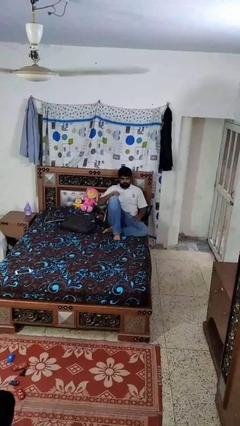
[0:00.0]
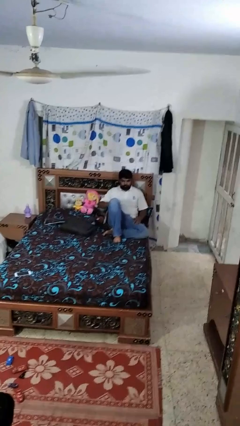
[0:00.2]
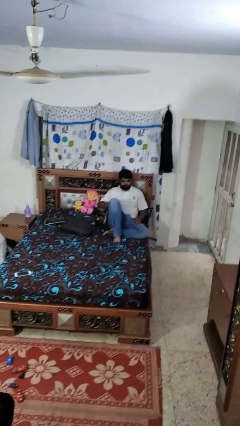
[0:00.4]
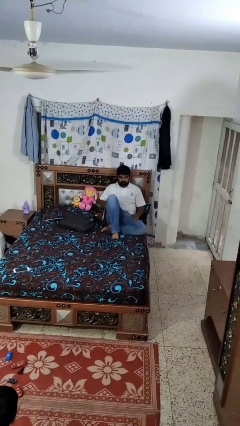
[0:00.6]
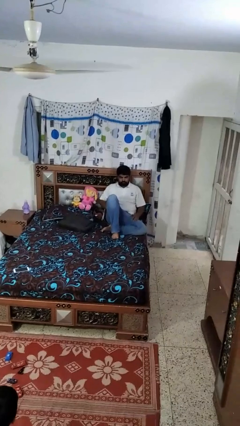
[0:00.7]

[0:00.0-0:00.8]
person gestures lower hand

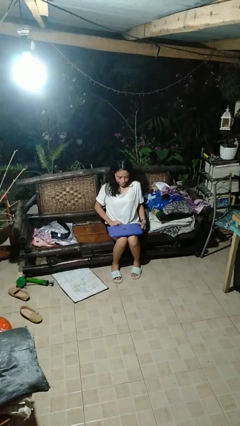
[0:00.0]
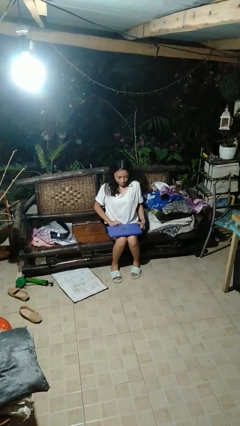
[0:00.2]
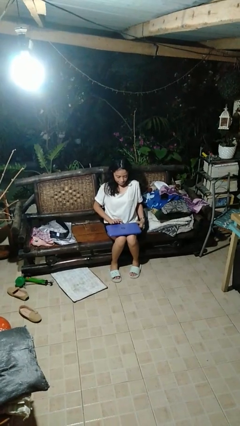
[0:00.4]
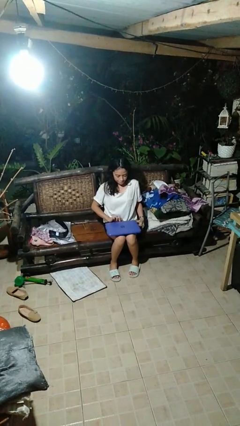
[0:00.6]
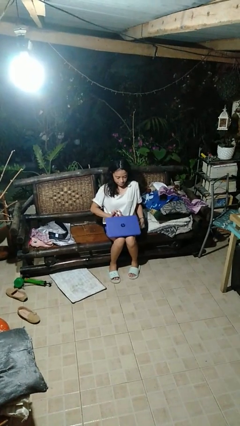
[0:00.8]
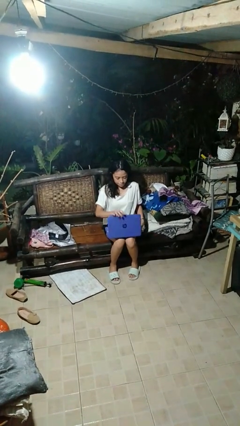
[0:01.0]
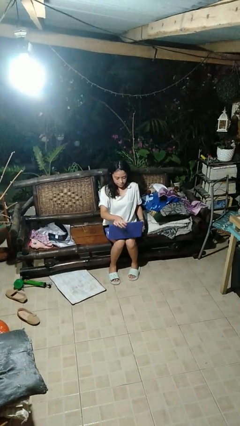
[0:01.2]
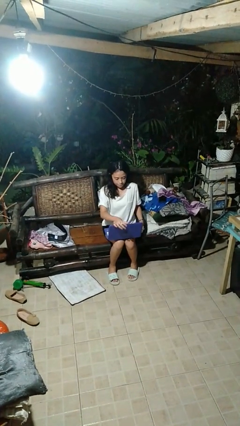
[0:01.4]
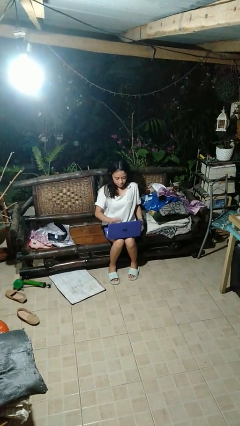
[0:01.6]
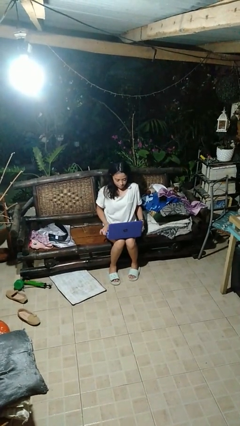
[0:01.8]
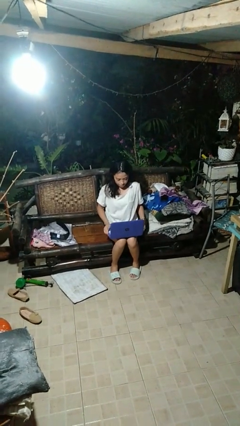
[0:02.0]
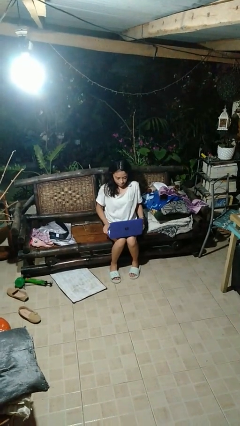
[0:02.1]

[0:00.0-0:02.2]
person opens laptop

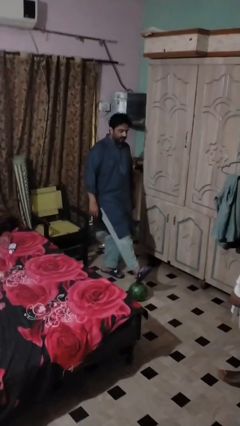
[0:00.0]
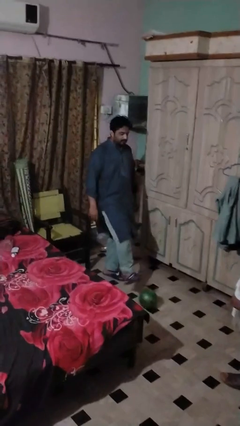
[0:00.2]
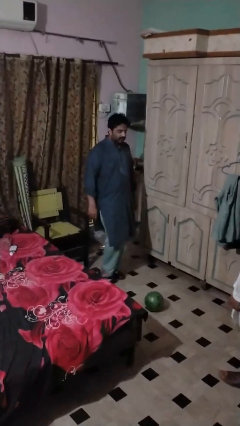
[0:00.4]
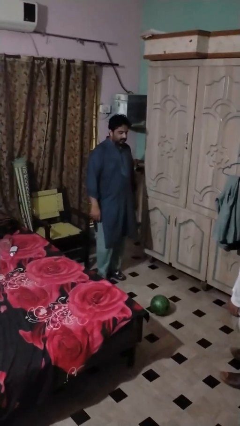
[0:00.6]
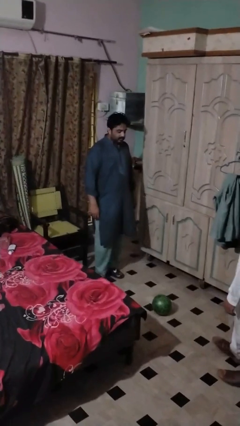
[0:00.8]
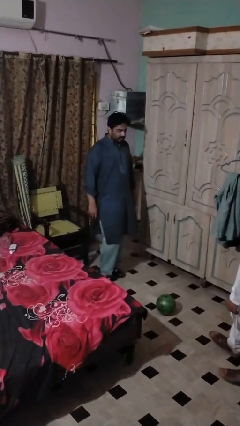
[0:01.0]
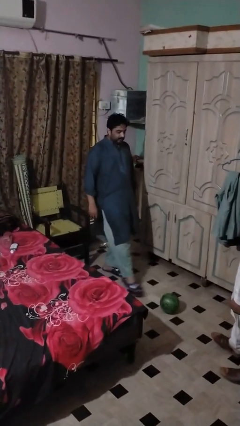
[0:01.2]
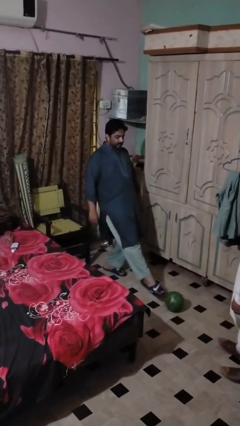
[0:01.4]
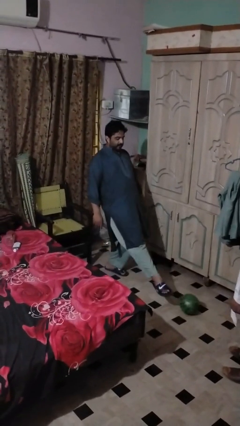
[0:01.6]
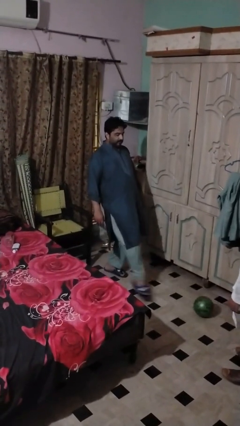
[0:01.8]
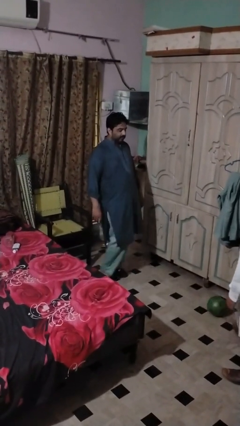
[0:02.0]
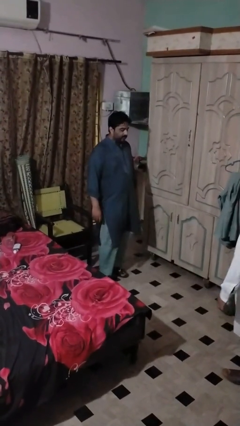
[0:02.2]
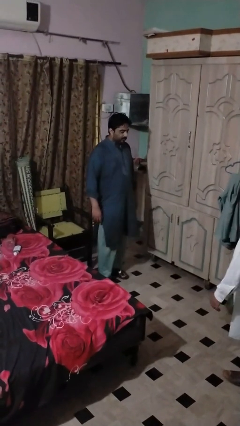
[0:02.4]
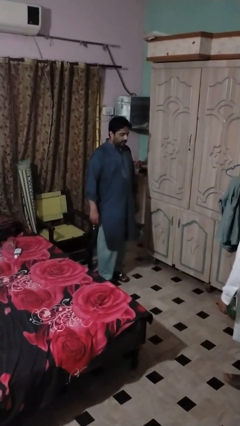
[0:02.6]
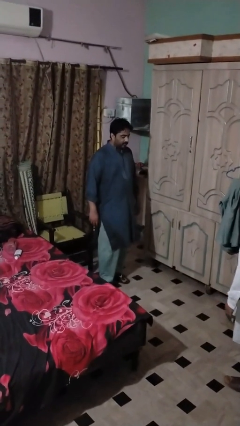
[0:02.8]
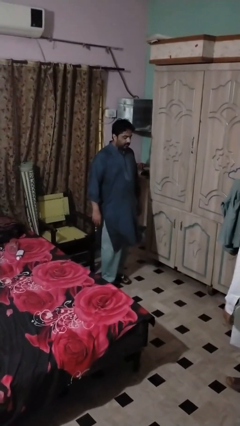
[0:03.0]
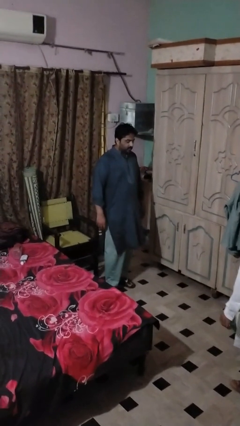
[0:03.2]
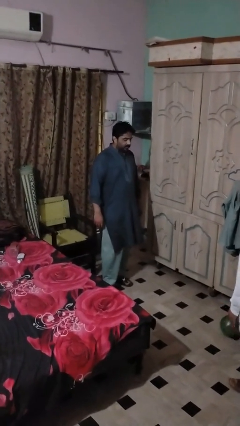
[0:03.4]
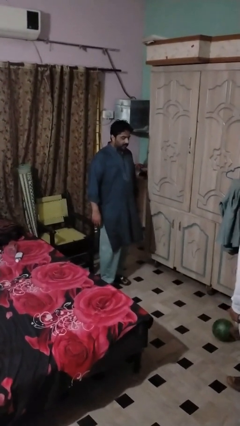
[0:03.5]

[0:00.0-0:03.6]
person kicks object to person

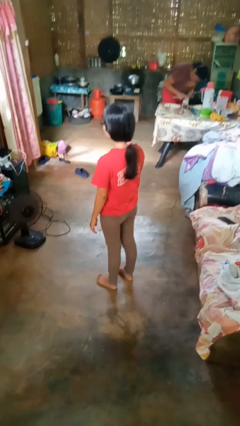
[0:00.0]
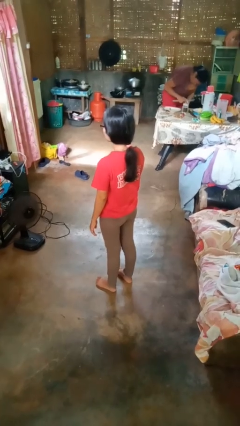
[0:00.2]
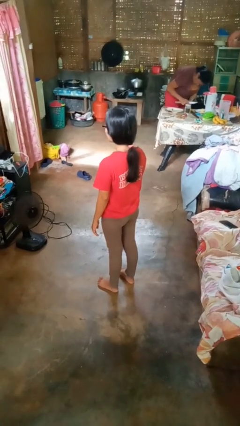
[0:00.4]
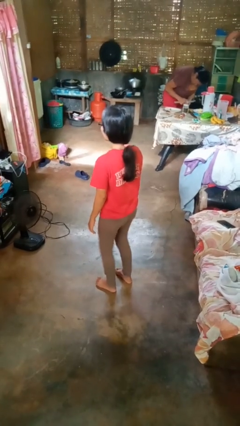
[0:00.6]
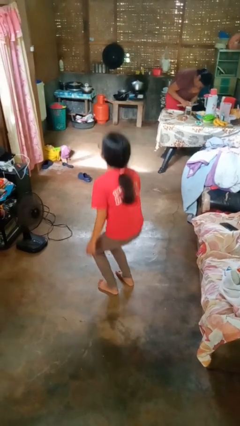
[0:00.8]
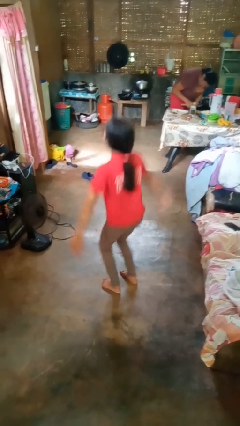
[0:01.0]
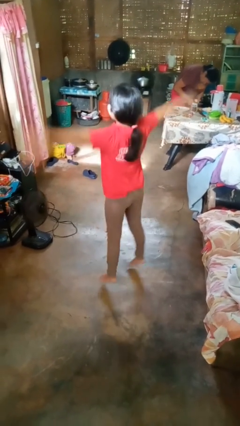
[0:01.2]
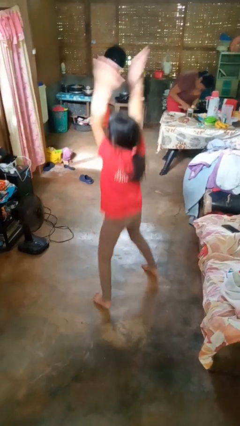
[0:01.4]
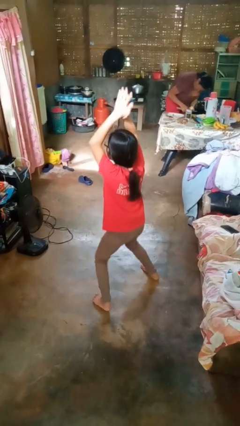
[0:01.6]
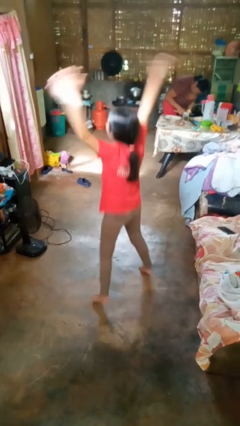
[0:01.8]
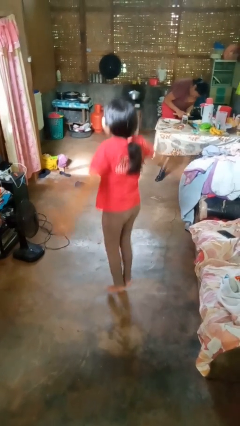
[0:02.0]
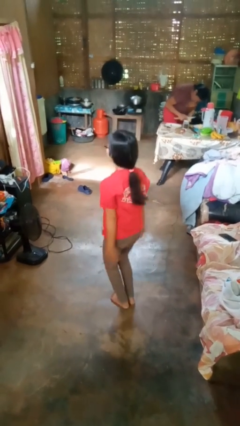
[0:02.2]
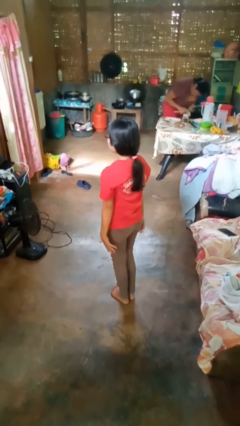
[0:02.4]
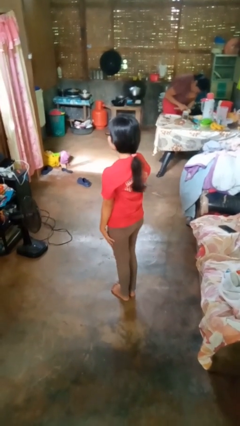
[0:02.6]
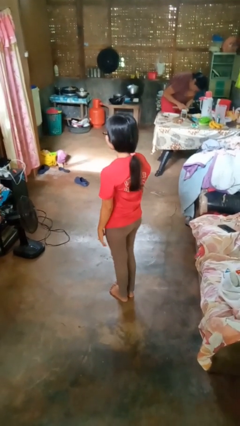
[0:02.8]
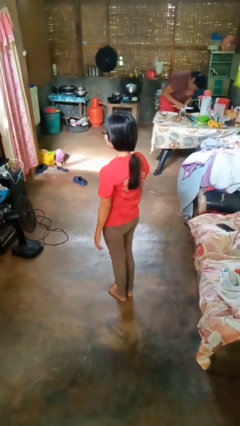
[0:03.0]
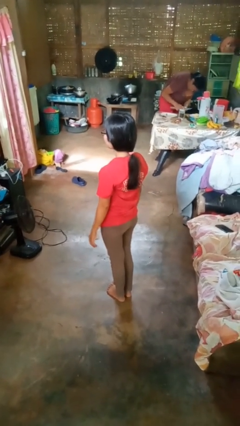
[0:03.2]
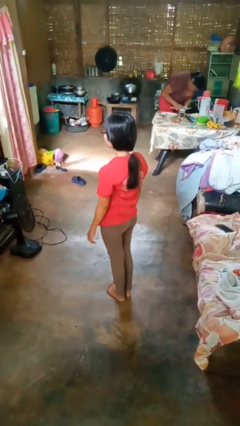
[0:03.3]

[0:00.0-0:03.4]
person exercises with jumping jacks

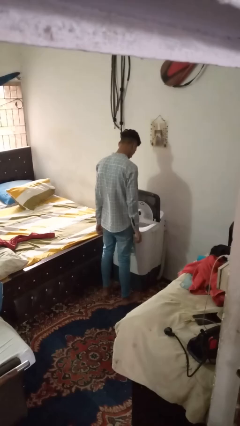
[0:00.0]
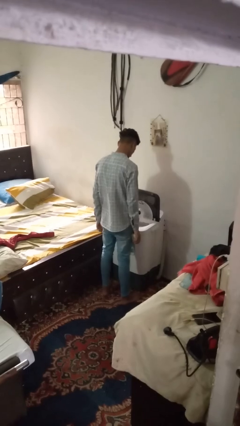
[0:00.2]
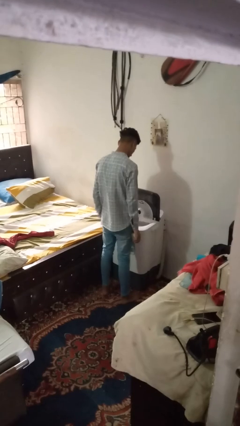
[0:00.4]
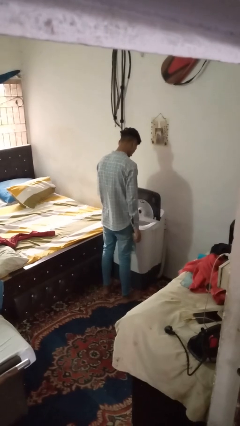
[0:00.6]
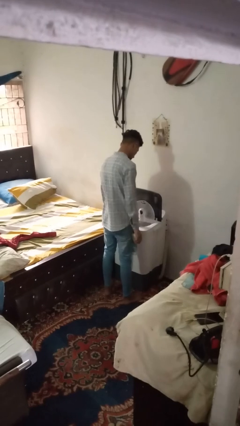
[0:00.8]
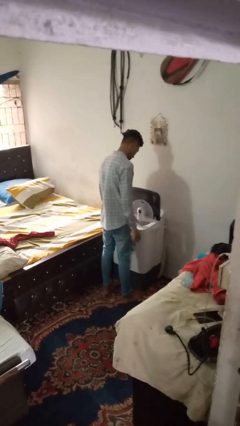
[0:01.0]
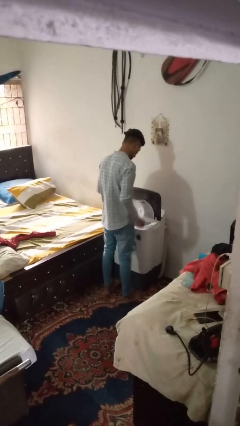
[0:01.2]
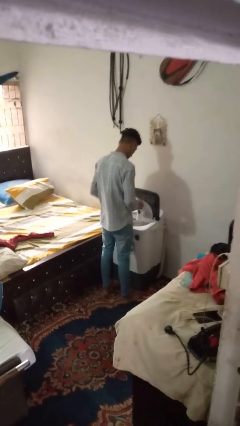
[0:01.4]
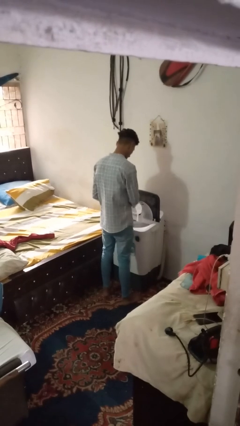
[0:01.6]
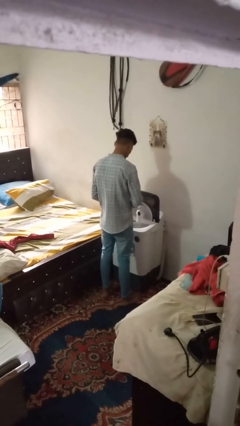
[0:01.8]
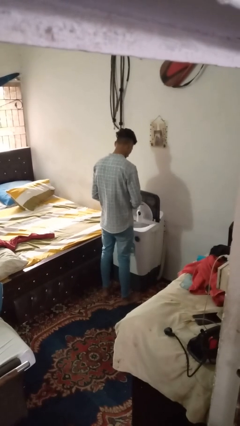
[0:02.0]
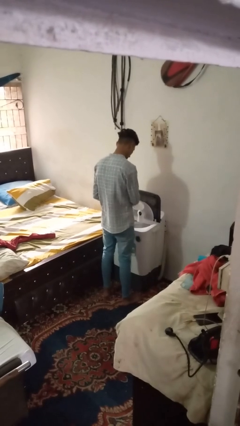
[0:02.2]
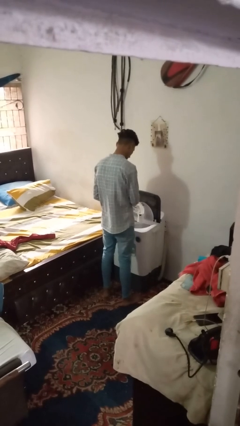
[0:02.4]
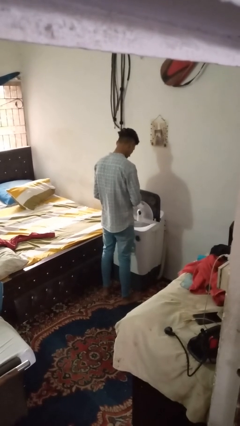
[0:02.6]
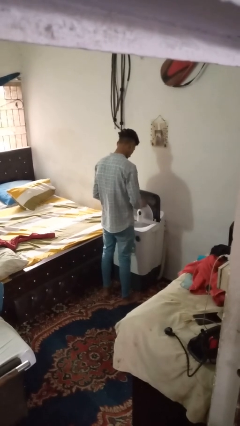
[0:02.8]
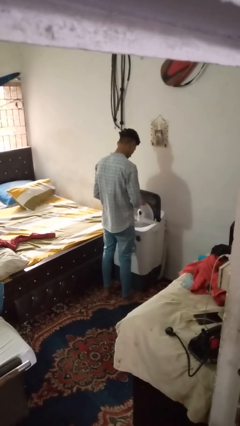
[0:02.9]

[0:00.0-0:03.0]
person cleans dryer lint trap

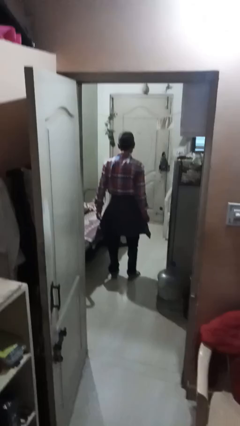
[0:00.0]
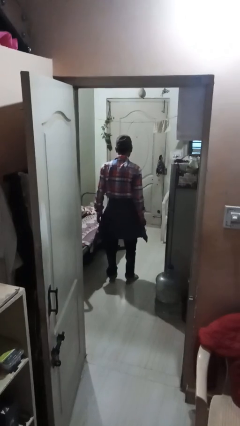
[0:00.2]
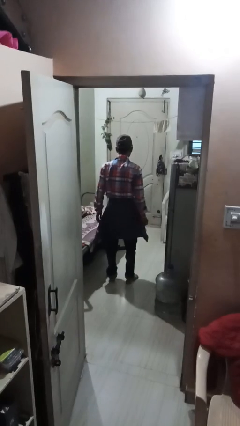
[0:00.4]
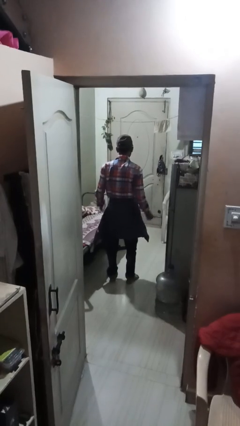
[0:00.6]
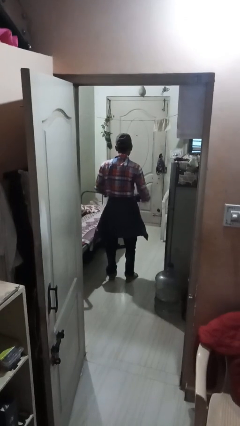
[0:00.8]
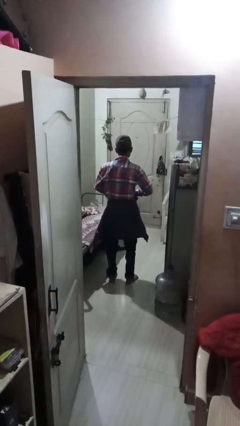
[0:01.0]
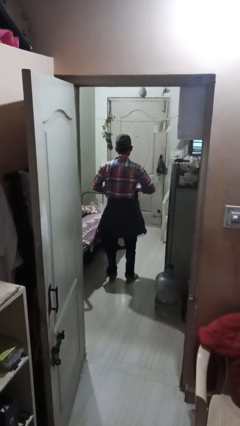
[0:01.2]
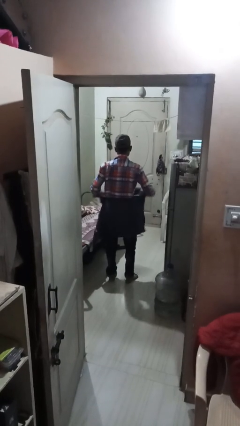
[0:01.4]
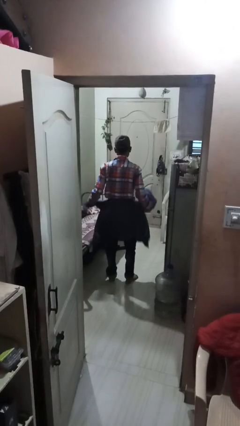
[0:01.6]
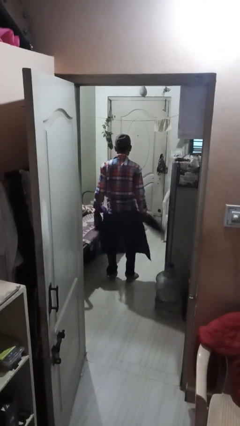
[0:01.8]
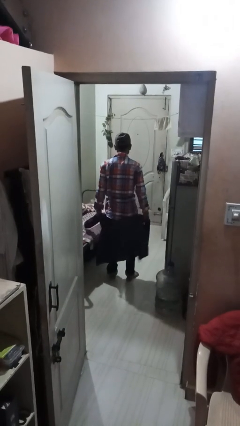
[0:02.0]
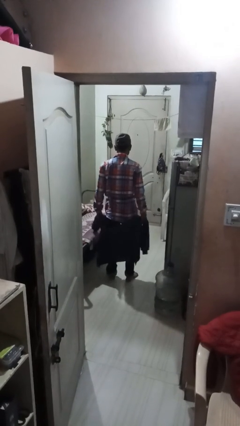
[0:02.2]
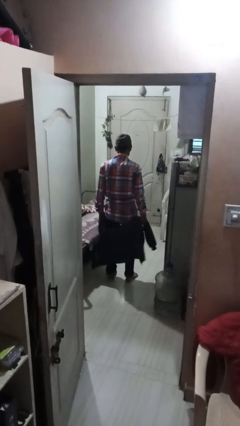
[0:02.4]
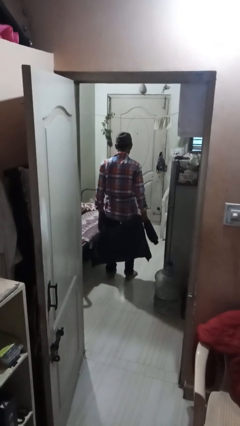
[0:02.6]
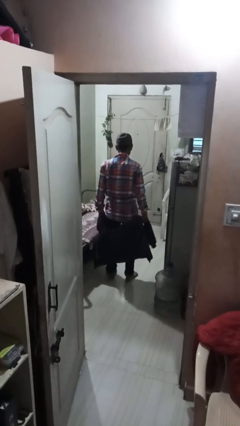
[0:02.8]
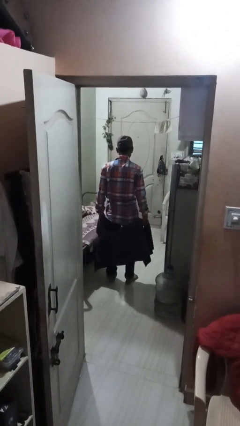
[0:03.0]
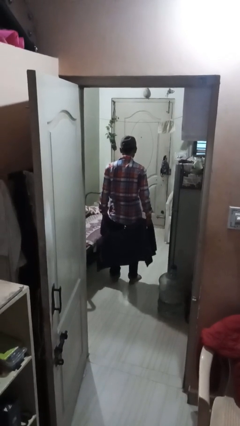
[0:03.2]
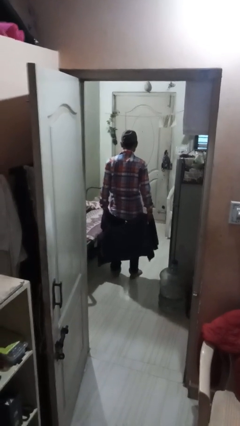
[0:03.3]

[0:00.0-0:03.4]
person unties jacket around waist
